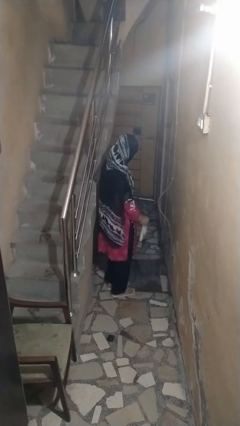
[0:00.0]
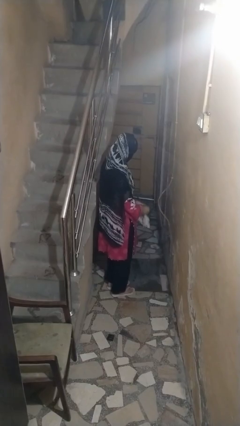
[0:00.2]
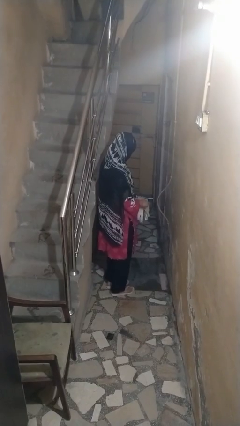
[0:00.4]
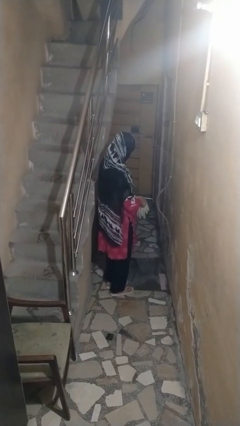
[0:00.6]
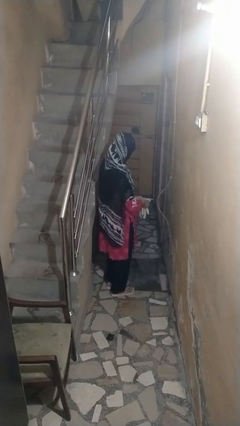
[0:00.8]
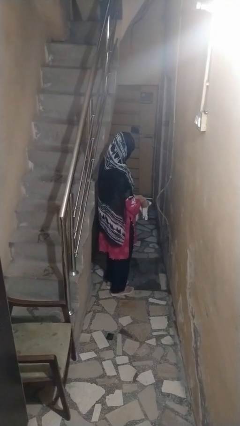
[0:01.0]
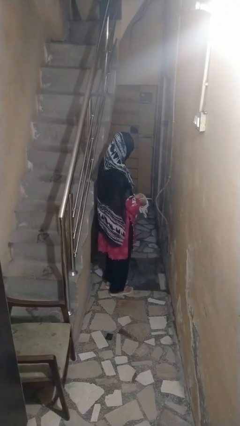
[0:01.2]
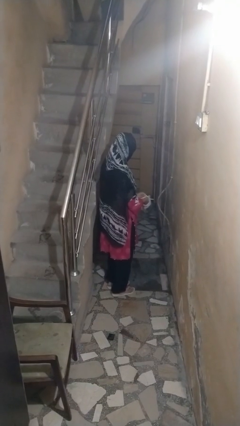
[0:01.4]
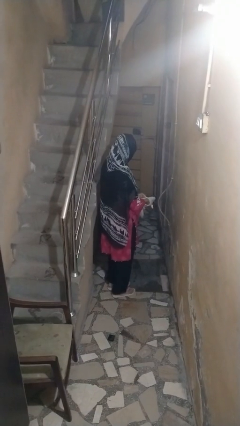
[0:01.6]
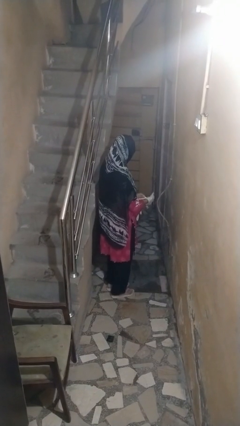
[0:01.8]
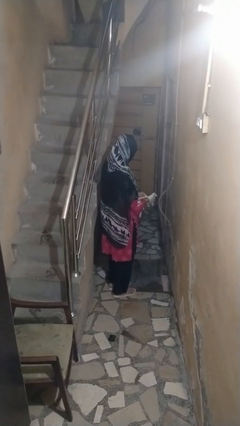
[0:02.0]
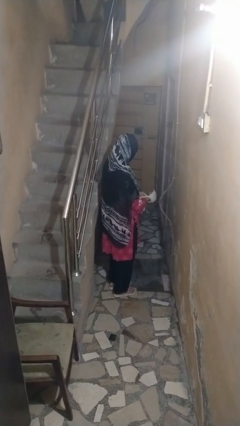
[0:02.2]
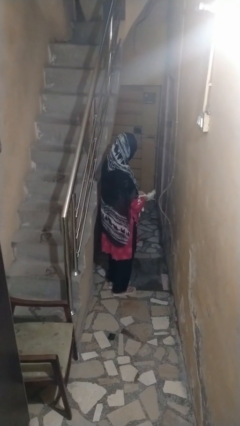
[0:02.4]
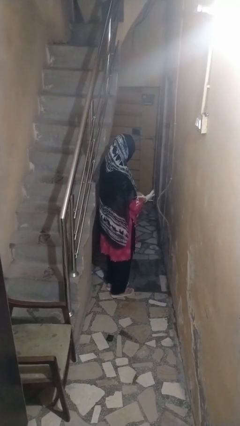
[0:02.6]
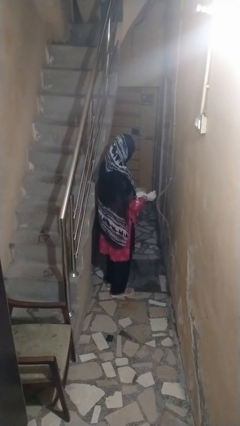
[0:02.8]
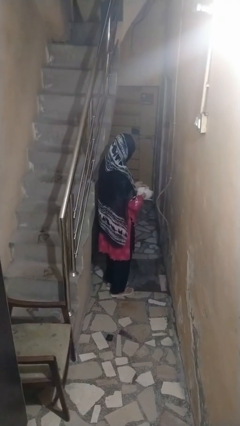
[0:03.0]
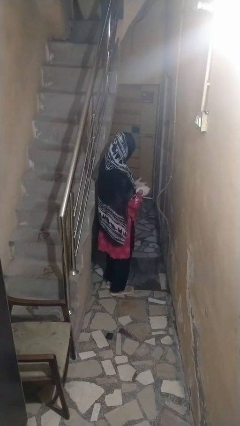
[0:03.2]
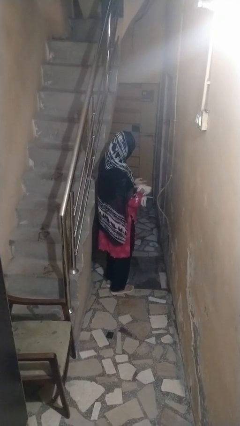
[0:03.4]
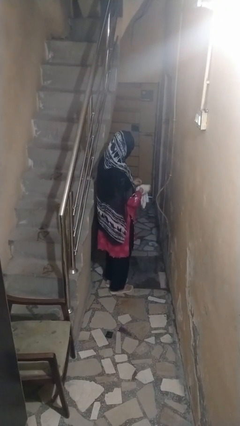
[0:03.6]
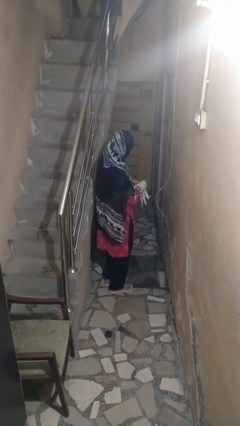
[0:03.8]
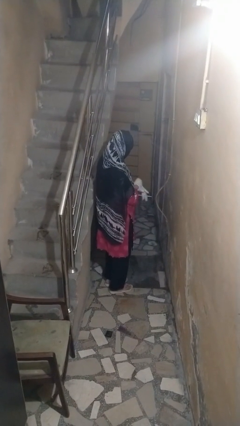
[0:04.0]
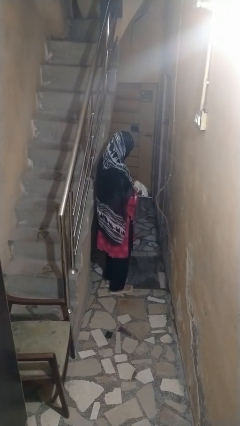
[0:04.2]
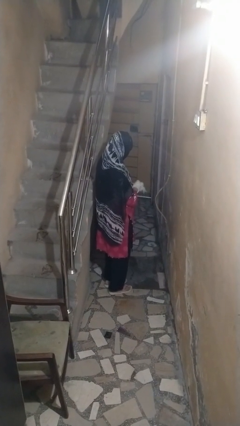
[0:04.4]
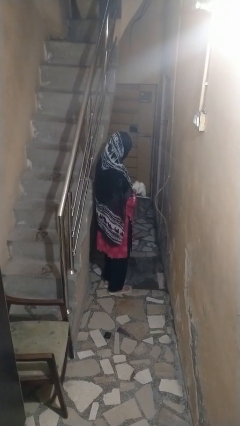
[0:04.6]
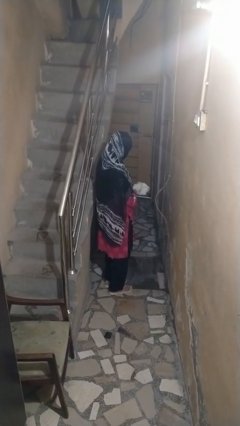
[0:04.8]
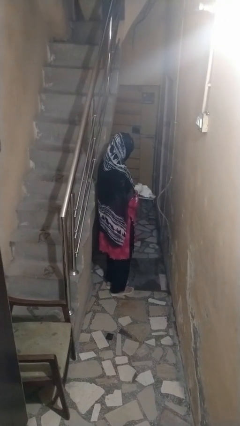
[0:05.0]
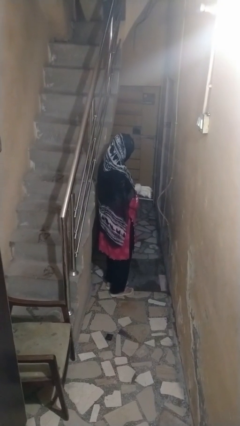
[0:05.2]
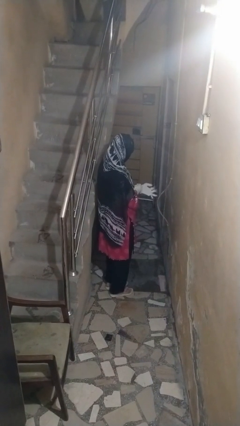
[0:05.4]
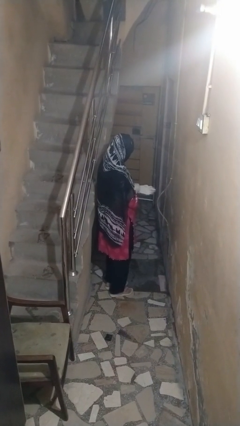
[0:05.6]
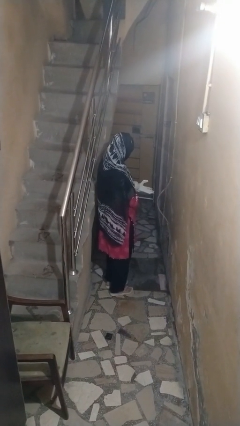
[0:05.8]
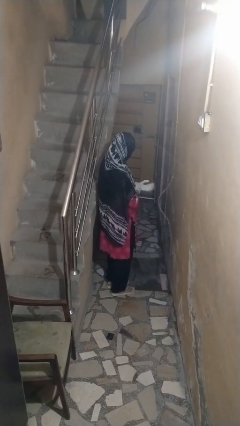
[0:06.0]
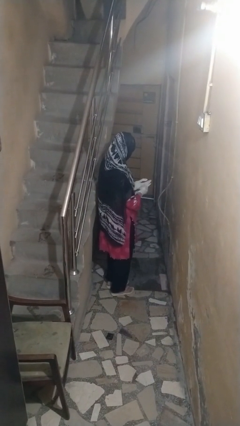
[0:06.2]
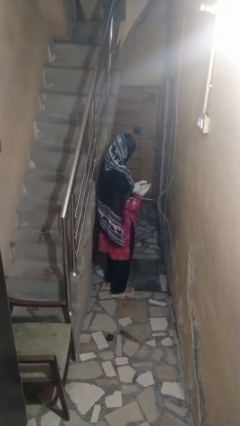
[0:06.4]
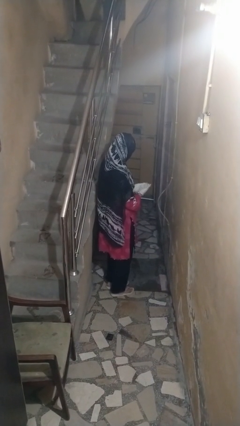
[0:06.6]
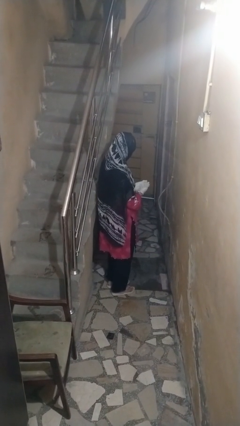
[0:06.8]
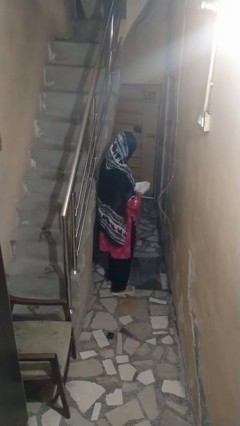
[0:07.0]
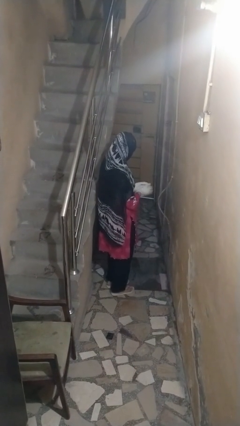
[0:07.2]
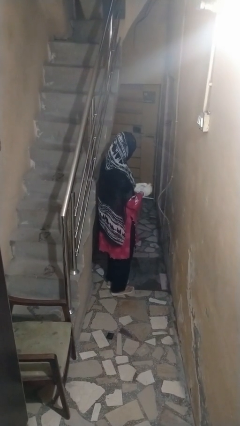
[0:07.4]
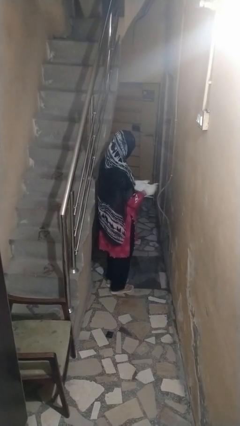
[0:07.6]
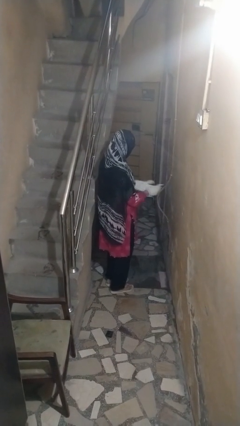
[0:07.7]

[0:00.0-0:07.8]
person puts on gloves

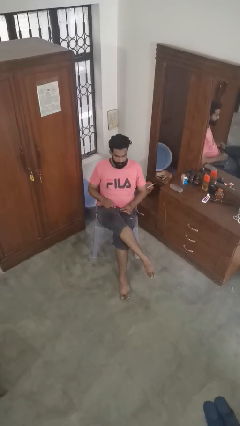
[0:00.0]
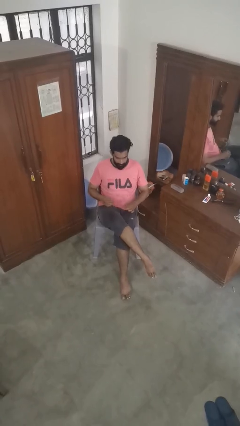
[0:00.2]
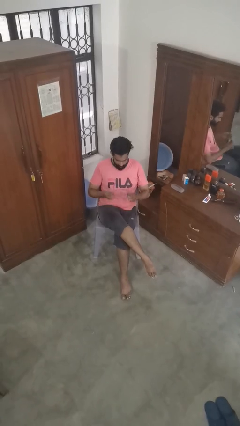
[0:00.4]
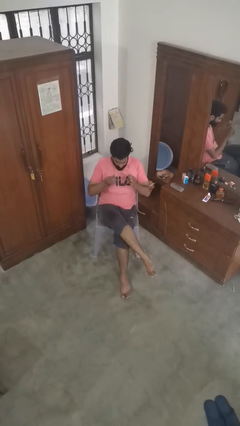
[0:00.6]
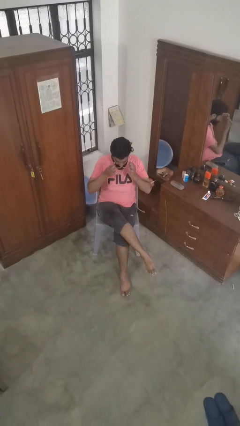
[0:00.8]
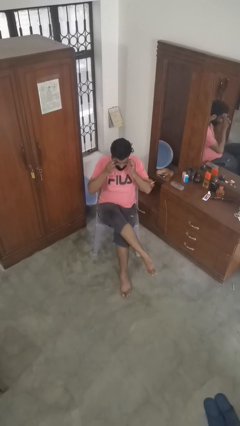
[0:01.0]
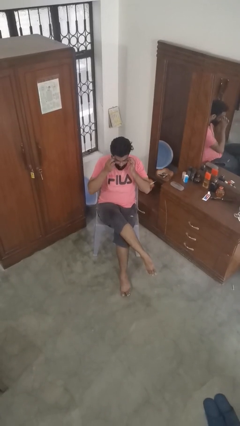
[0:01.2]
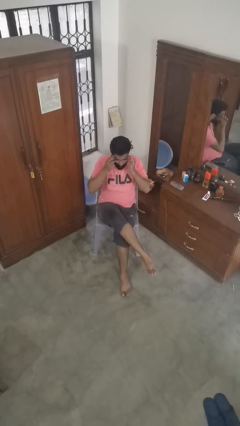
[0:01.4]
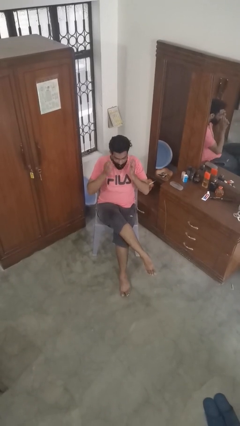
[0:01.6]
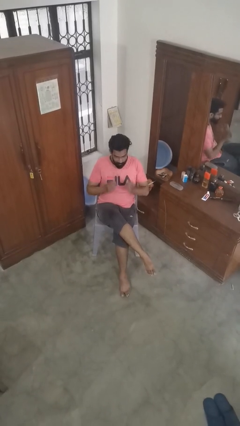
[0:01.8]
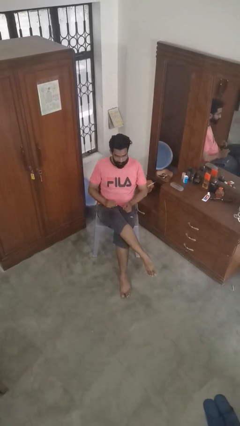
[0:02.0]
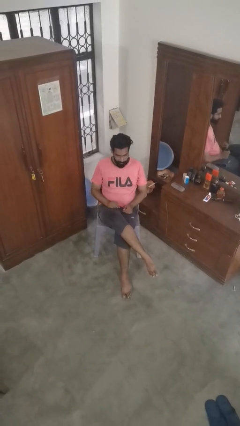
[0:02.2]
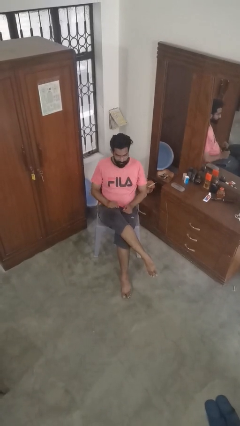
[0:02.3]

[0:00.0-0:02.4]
person puts on glasses

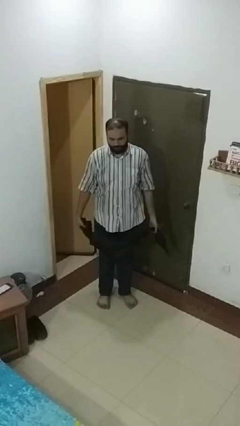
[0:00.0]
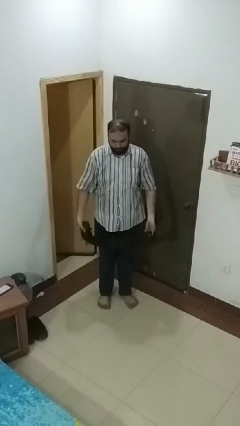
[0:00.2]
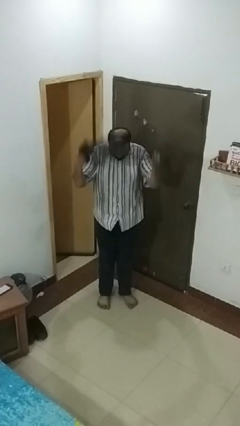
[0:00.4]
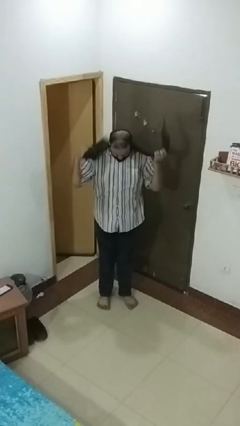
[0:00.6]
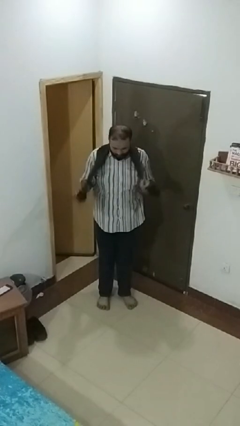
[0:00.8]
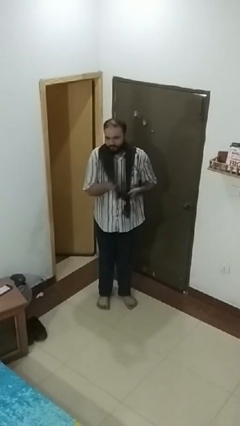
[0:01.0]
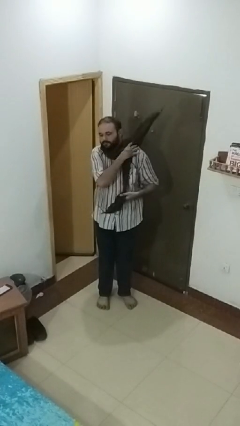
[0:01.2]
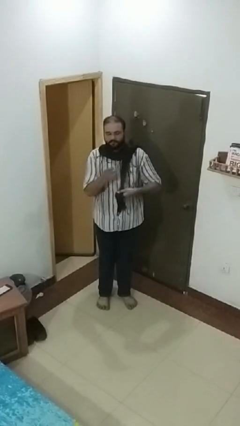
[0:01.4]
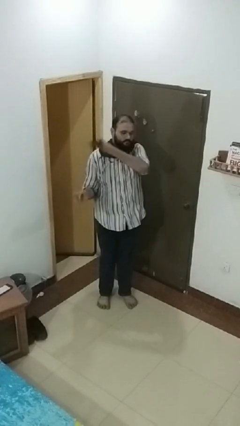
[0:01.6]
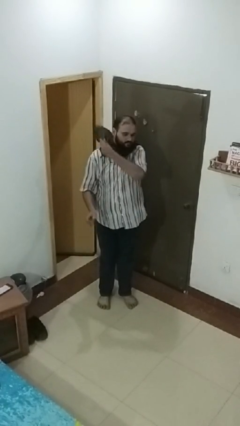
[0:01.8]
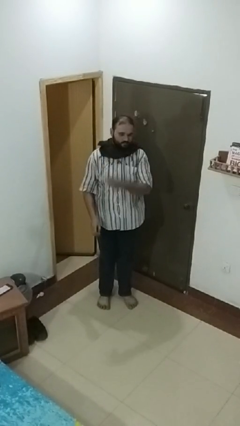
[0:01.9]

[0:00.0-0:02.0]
person puts on scarf

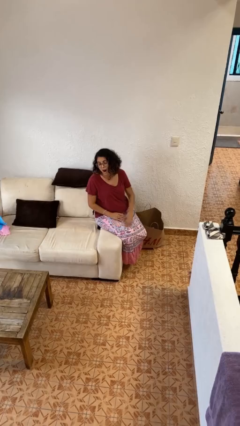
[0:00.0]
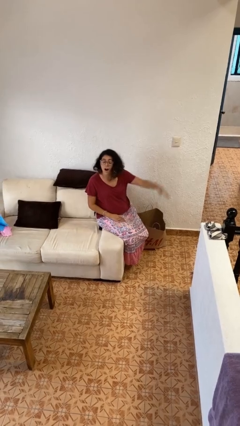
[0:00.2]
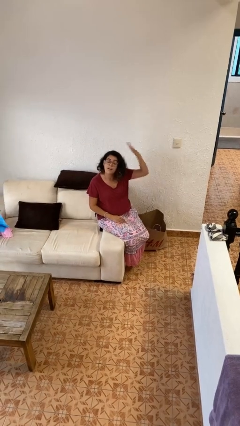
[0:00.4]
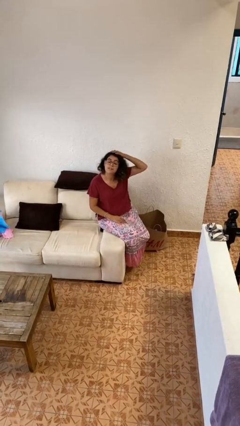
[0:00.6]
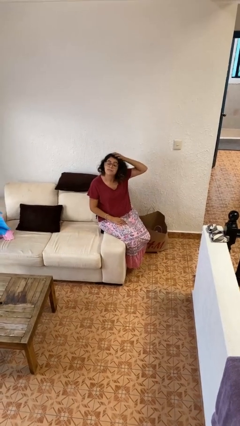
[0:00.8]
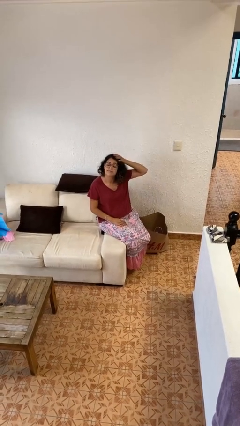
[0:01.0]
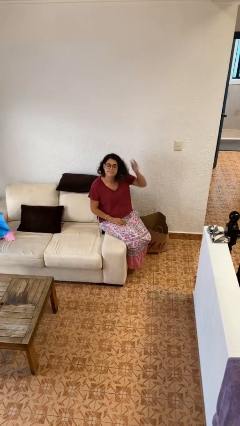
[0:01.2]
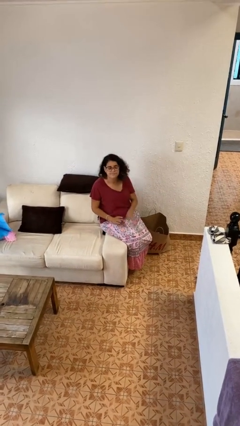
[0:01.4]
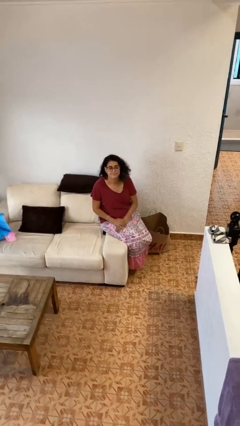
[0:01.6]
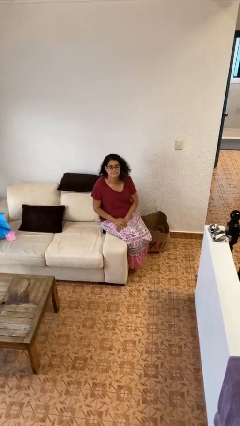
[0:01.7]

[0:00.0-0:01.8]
person pats head

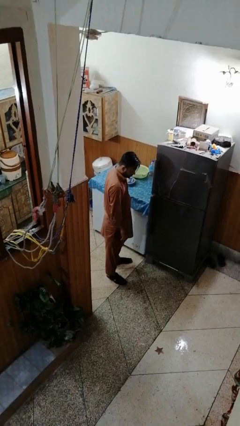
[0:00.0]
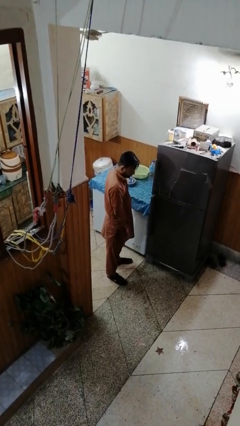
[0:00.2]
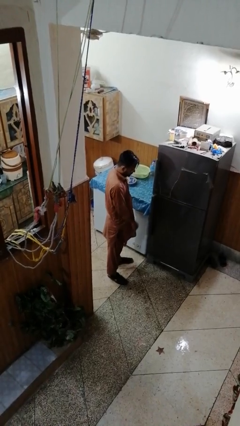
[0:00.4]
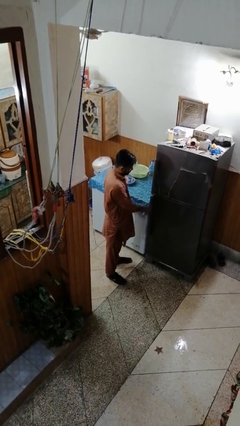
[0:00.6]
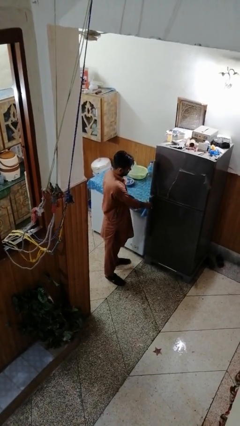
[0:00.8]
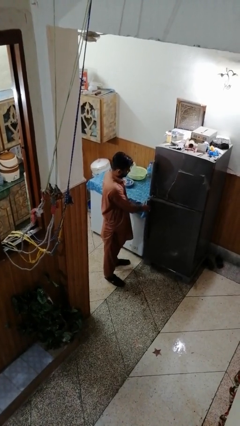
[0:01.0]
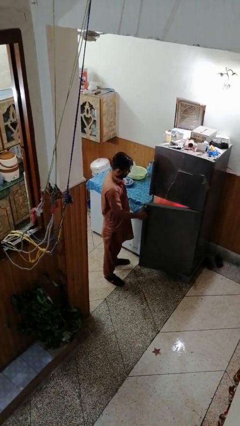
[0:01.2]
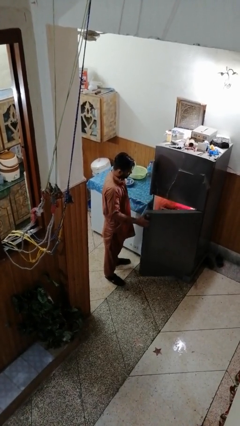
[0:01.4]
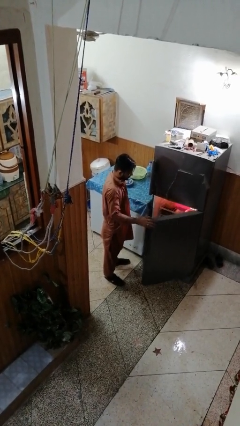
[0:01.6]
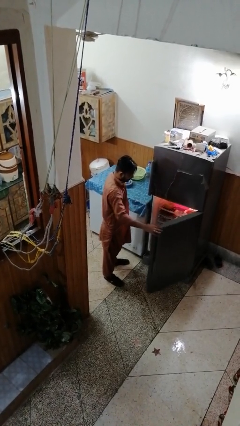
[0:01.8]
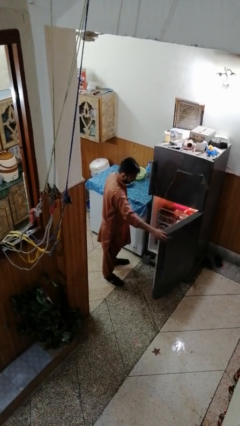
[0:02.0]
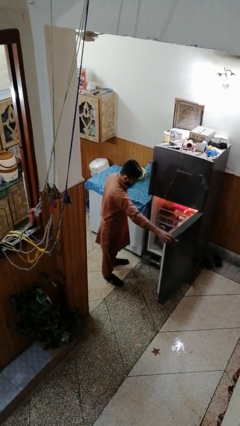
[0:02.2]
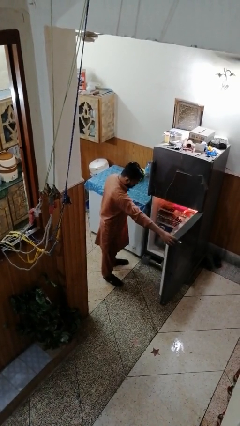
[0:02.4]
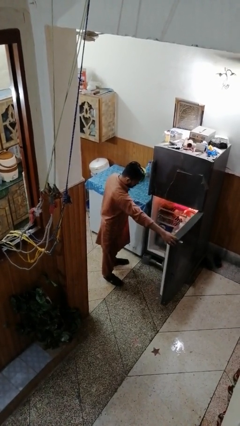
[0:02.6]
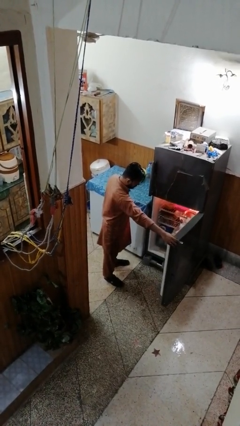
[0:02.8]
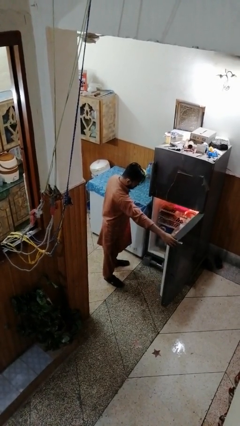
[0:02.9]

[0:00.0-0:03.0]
person opens refrigerator

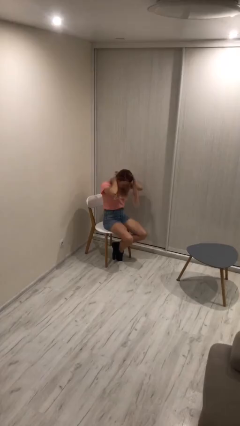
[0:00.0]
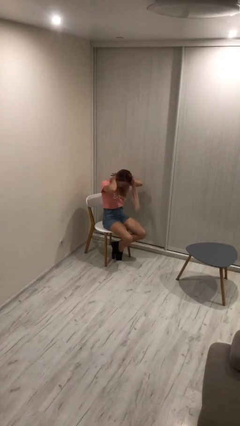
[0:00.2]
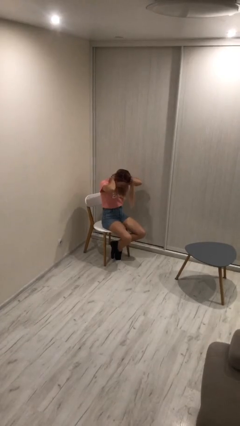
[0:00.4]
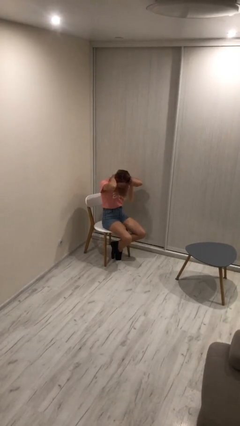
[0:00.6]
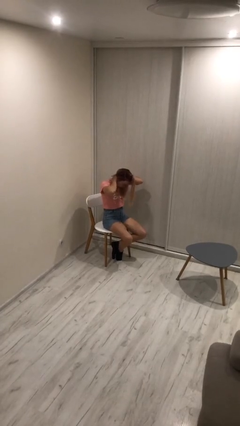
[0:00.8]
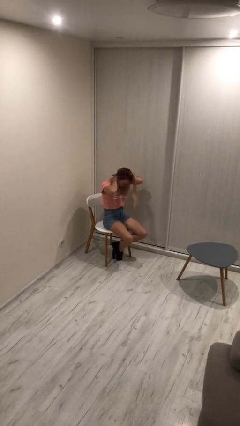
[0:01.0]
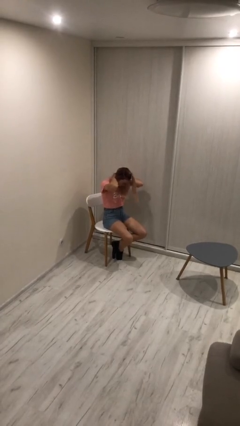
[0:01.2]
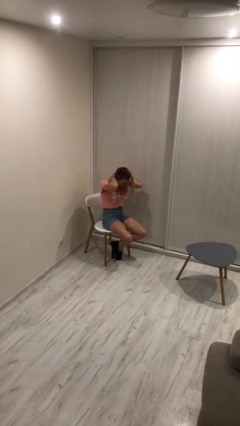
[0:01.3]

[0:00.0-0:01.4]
person rubs neck
